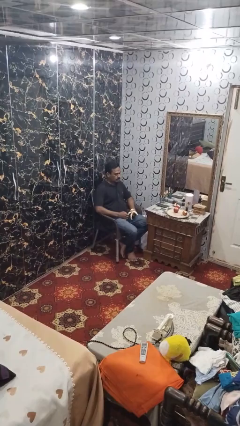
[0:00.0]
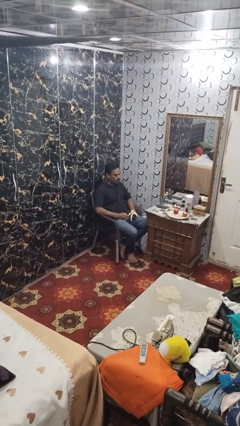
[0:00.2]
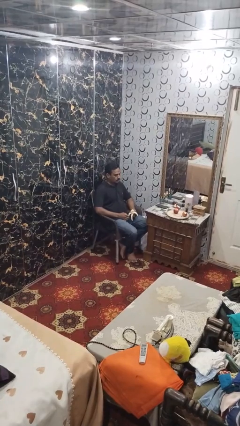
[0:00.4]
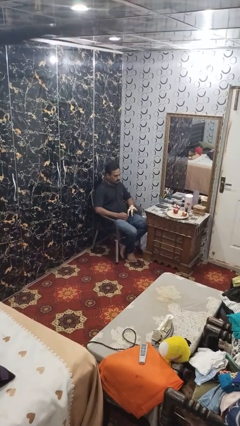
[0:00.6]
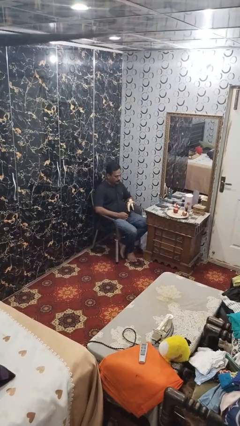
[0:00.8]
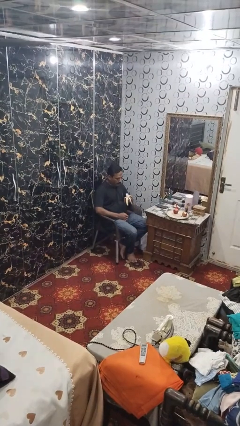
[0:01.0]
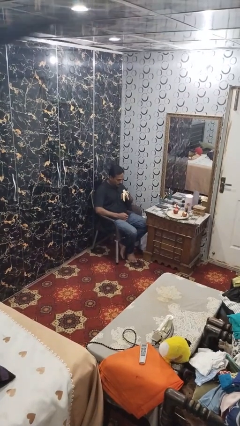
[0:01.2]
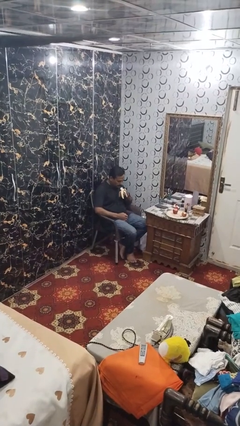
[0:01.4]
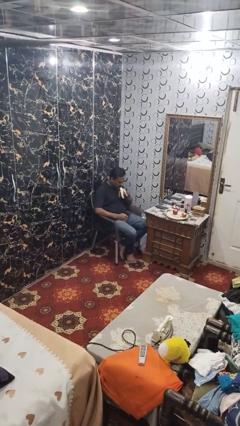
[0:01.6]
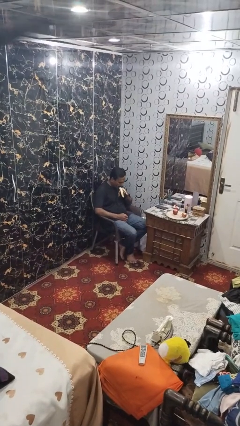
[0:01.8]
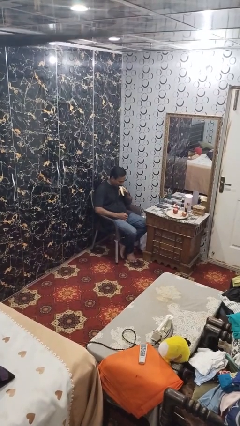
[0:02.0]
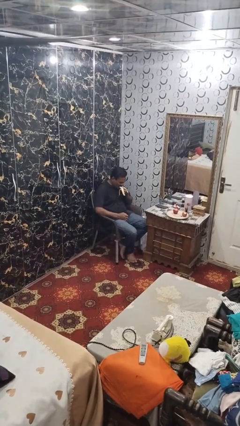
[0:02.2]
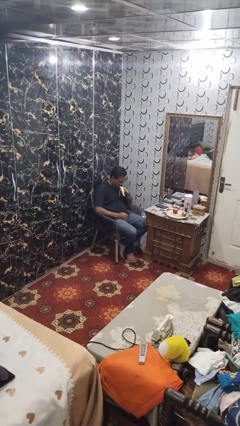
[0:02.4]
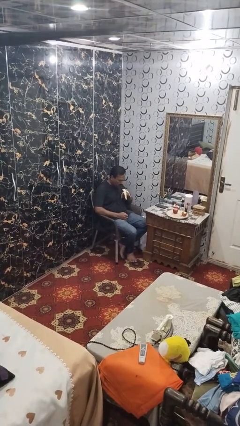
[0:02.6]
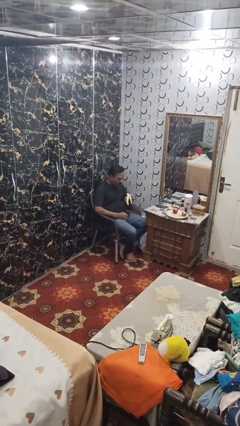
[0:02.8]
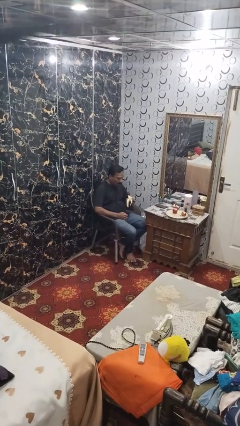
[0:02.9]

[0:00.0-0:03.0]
person eats banana

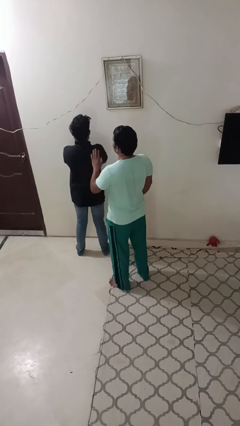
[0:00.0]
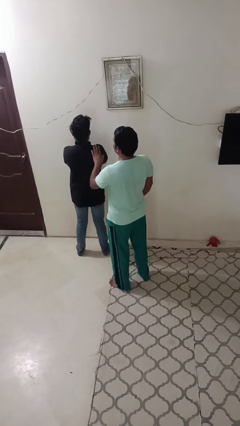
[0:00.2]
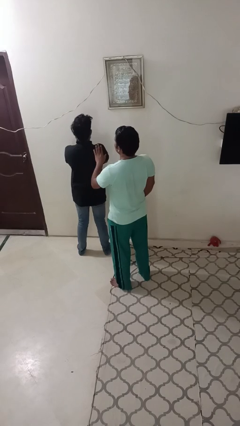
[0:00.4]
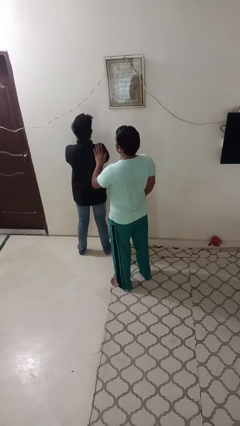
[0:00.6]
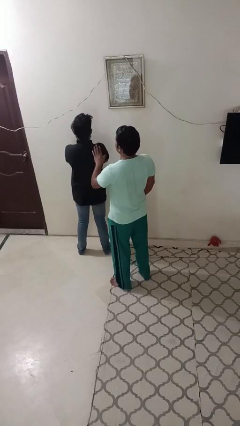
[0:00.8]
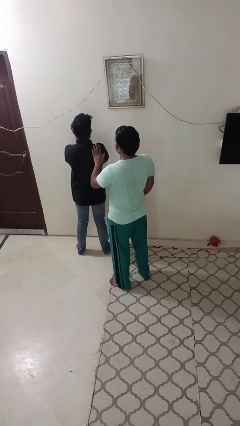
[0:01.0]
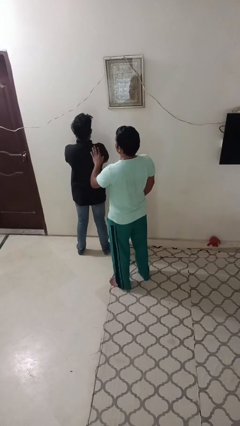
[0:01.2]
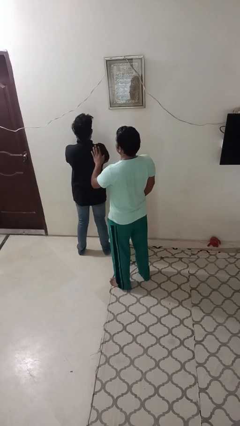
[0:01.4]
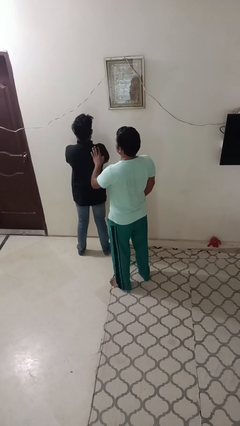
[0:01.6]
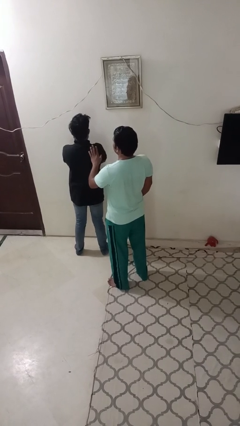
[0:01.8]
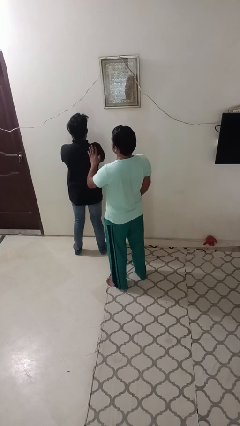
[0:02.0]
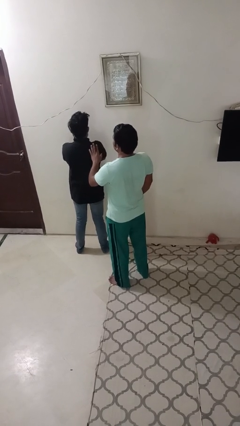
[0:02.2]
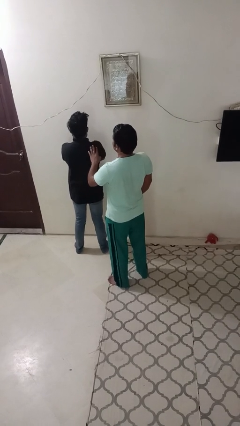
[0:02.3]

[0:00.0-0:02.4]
person touches back of person

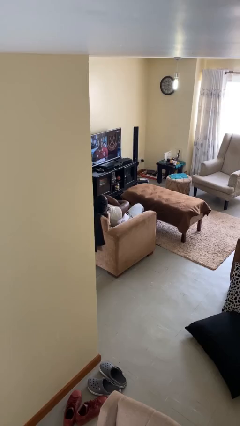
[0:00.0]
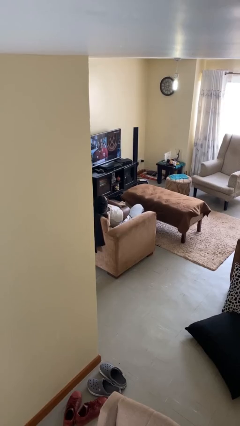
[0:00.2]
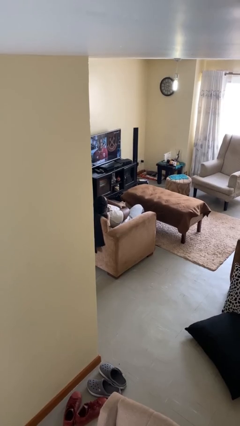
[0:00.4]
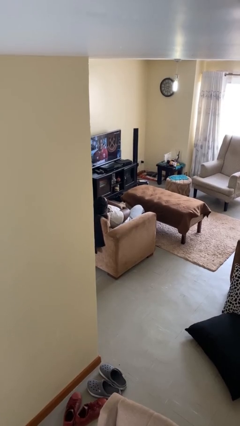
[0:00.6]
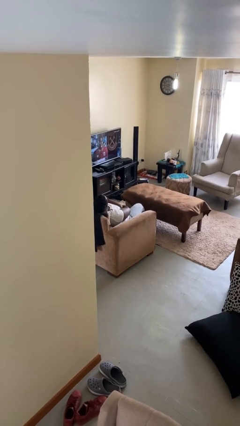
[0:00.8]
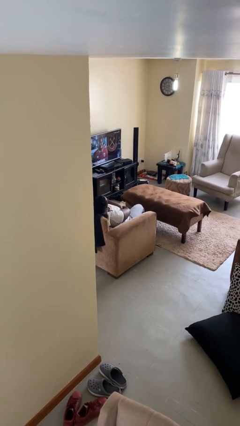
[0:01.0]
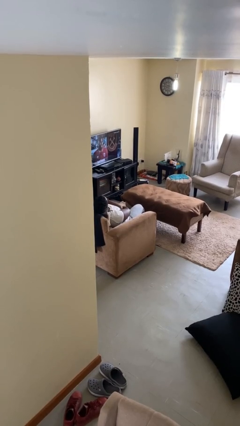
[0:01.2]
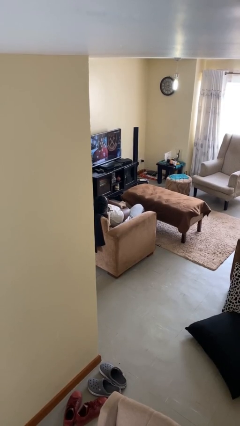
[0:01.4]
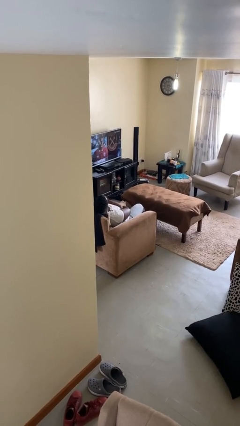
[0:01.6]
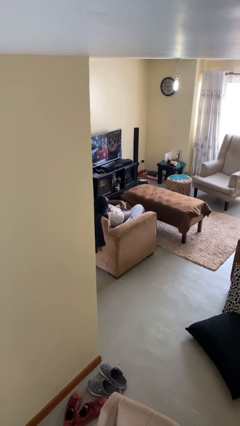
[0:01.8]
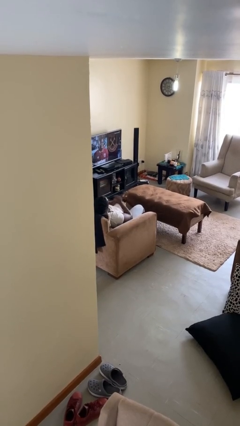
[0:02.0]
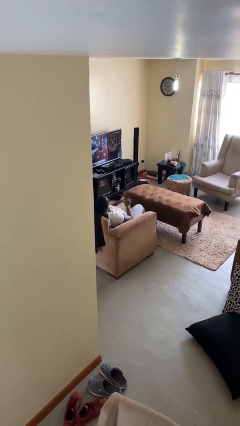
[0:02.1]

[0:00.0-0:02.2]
person crosses arms

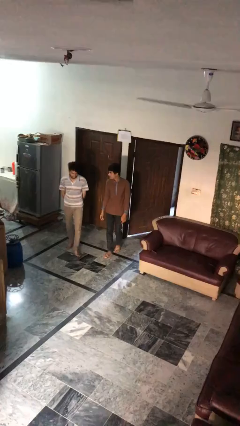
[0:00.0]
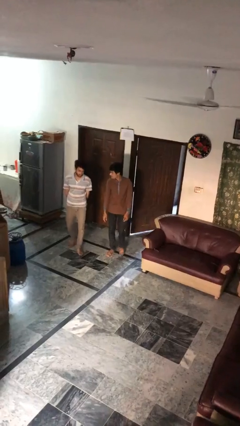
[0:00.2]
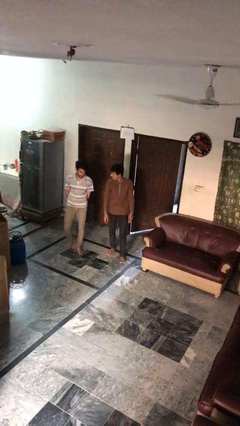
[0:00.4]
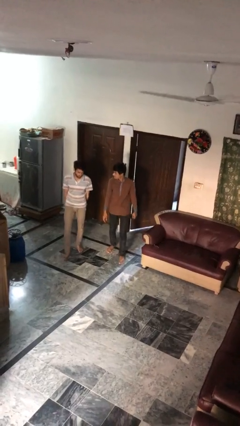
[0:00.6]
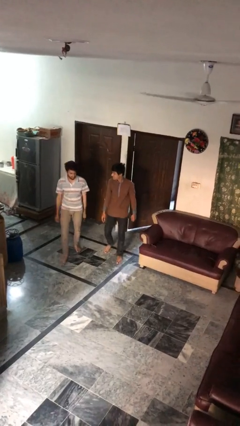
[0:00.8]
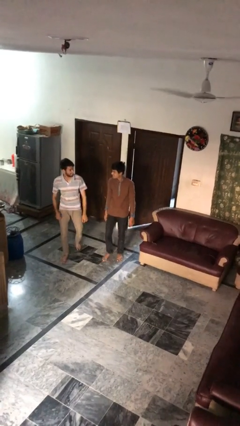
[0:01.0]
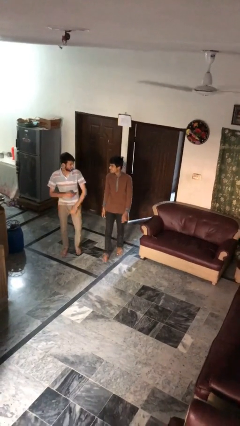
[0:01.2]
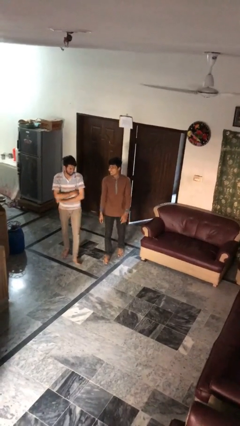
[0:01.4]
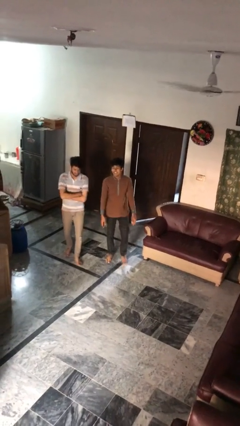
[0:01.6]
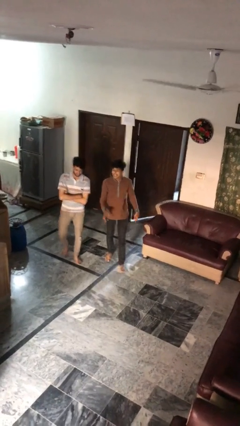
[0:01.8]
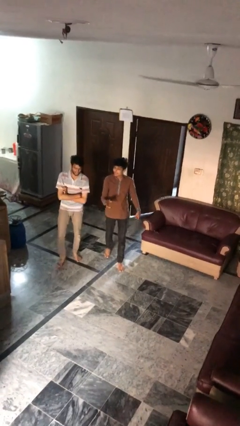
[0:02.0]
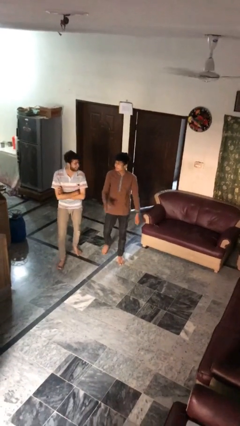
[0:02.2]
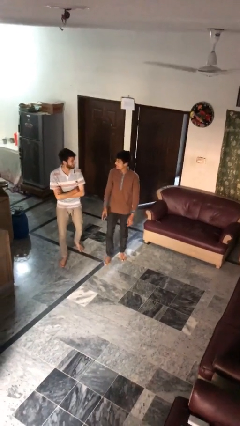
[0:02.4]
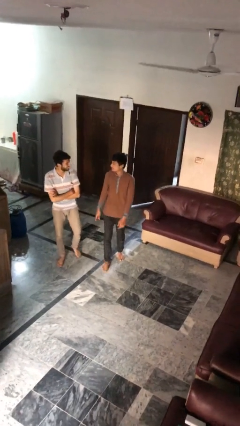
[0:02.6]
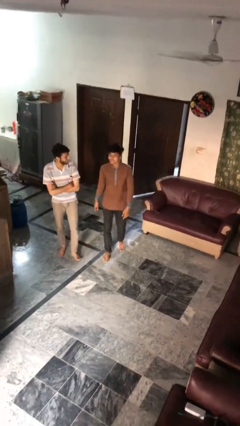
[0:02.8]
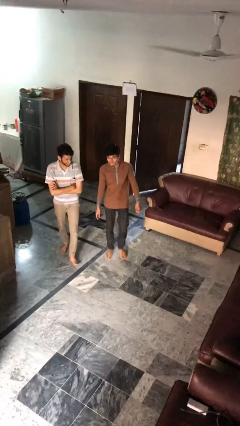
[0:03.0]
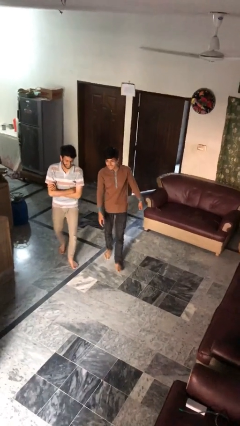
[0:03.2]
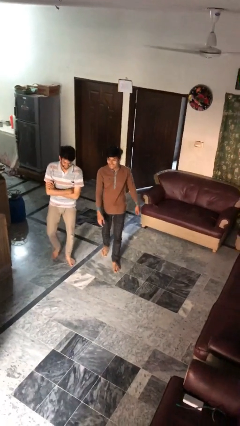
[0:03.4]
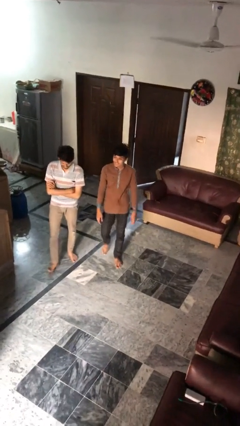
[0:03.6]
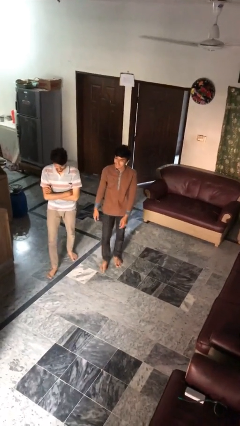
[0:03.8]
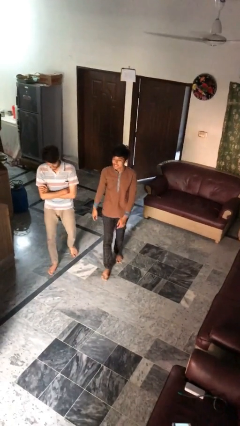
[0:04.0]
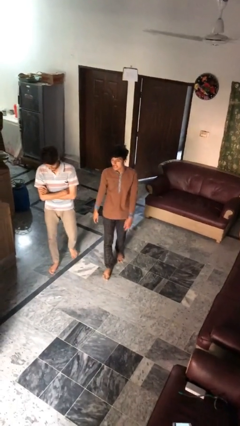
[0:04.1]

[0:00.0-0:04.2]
person talks to person

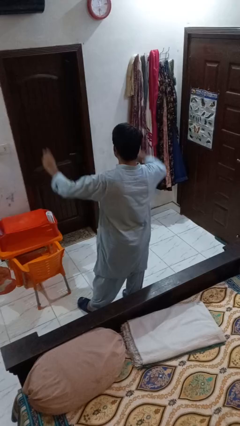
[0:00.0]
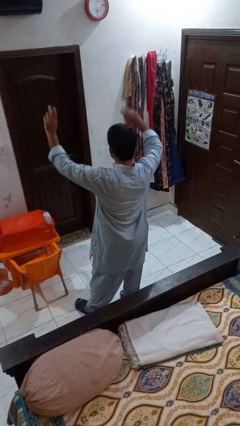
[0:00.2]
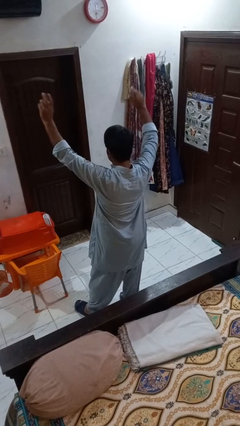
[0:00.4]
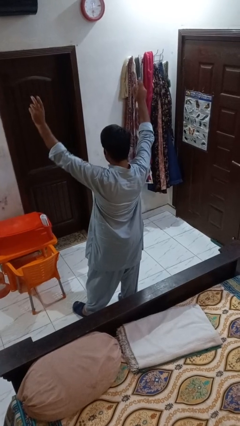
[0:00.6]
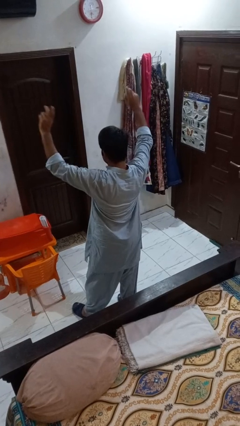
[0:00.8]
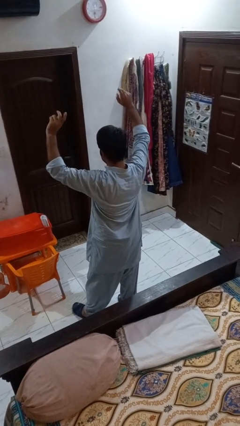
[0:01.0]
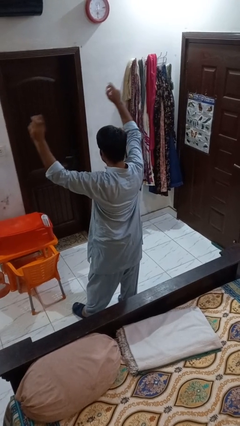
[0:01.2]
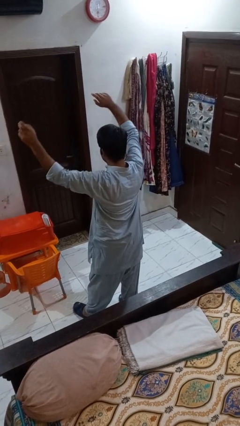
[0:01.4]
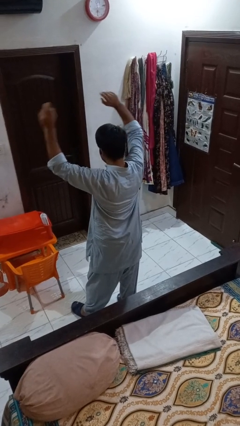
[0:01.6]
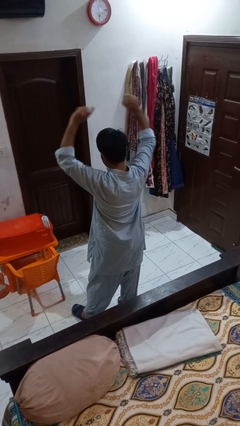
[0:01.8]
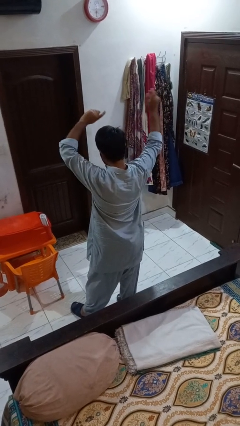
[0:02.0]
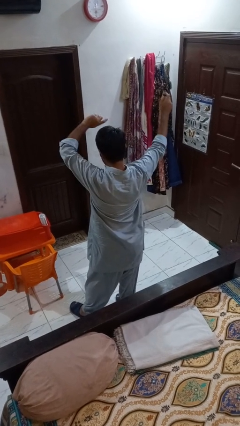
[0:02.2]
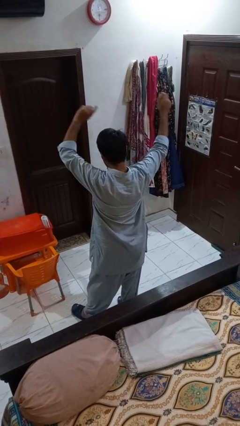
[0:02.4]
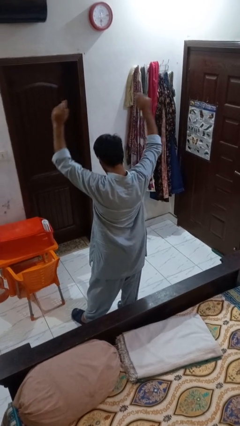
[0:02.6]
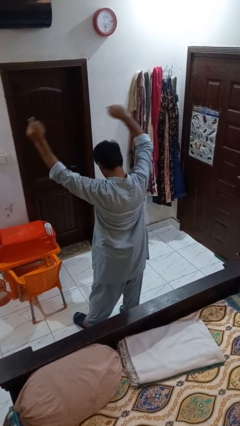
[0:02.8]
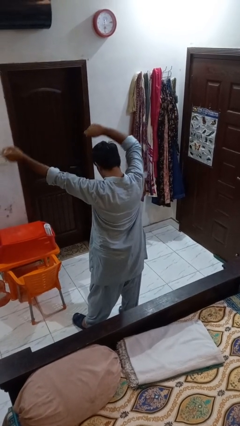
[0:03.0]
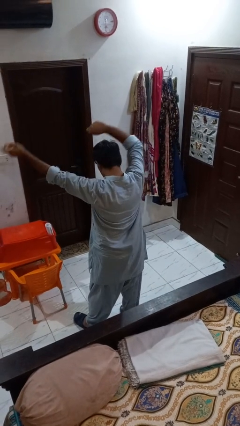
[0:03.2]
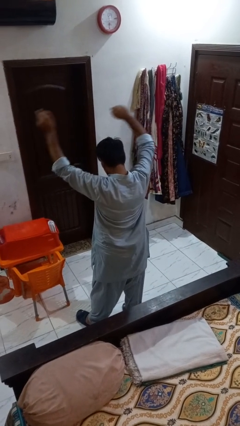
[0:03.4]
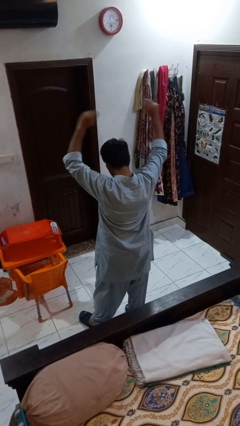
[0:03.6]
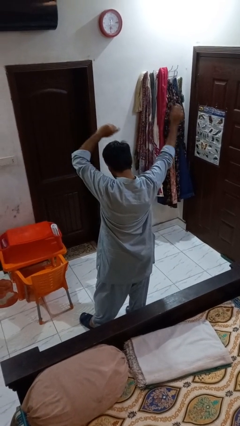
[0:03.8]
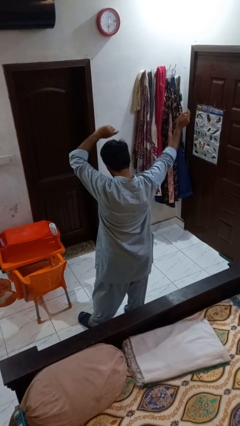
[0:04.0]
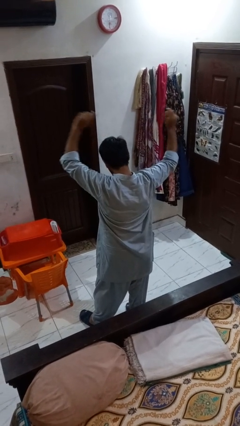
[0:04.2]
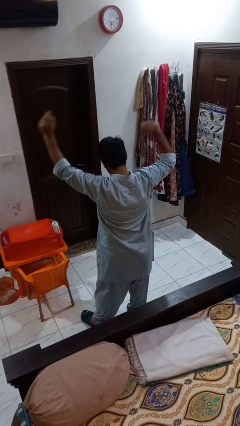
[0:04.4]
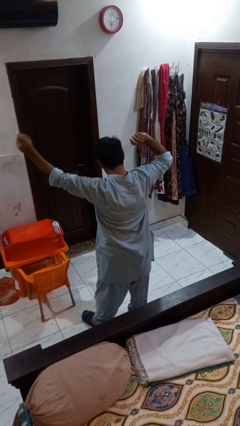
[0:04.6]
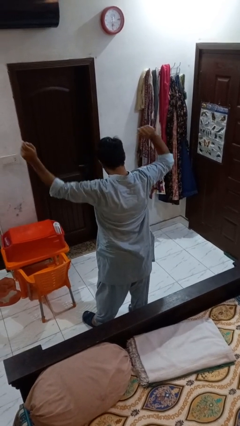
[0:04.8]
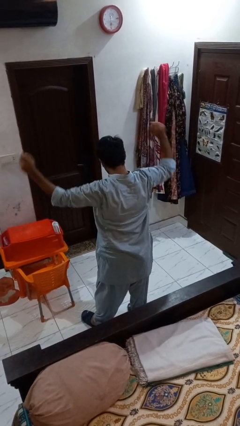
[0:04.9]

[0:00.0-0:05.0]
person dances in place

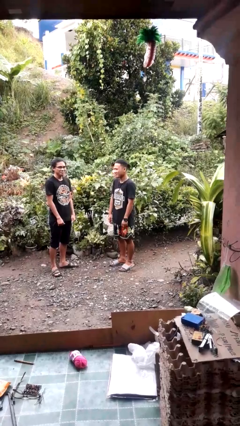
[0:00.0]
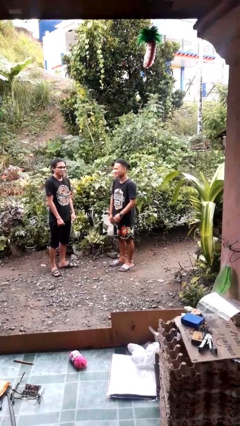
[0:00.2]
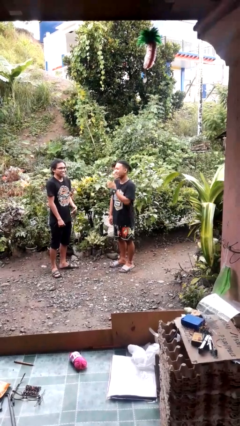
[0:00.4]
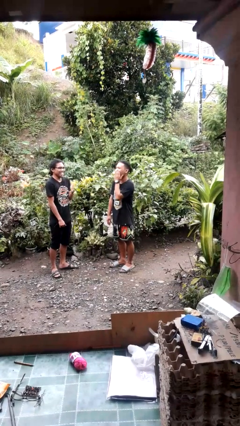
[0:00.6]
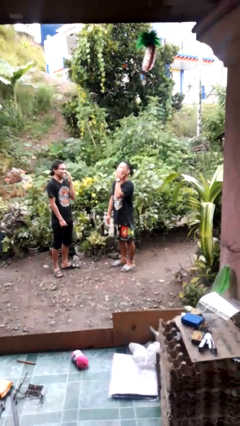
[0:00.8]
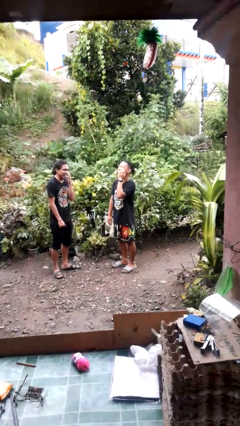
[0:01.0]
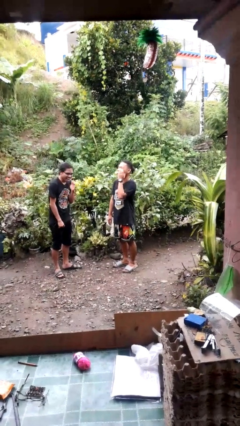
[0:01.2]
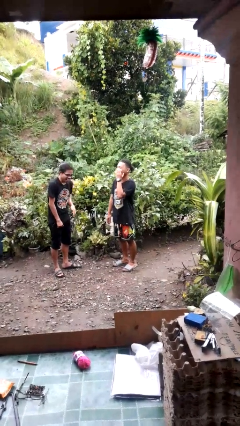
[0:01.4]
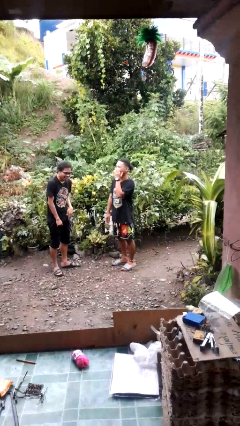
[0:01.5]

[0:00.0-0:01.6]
person laughs with person
